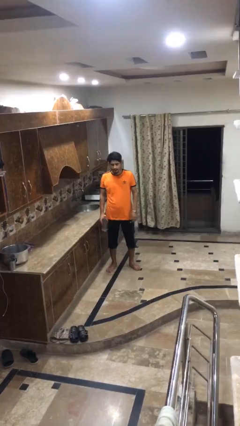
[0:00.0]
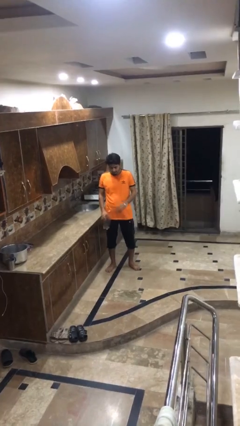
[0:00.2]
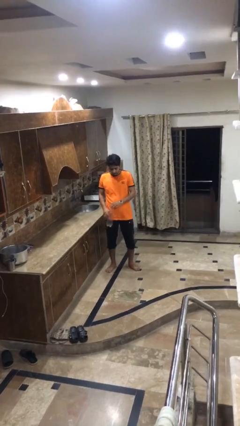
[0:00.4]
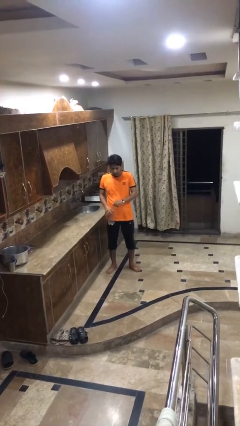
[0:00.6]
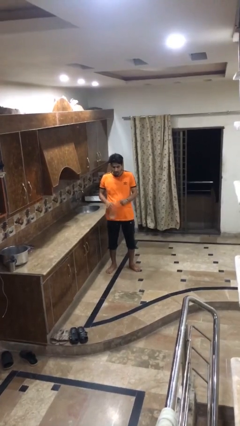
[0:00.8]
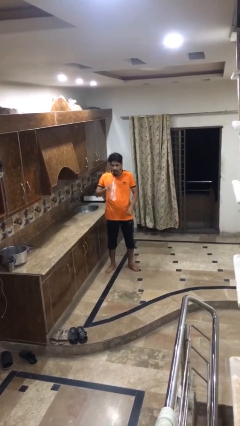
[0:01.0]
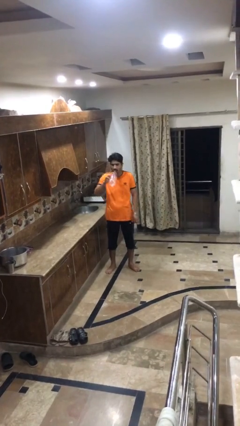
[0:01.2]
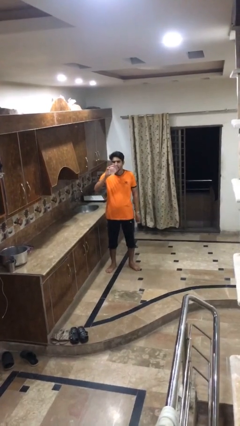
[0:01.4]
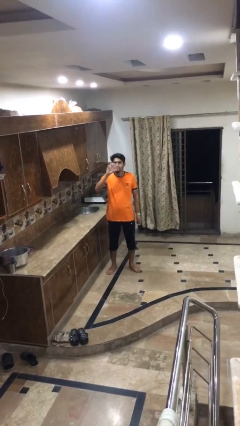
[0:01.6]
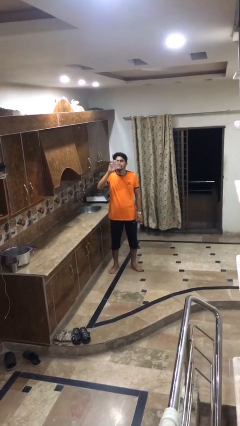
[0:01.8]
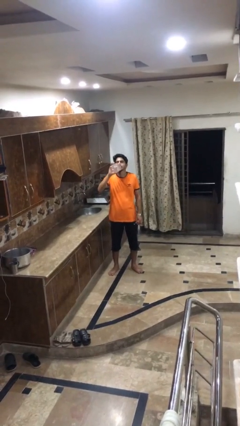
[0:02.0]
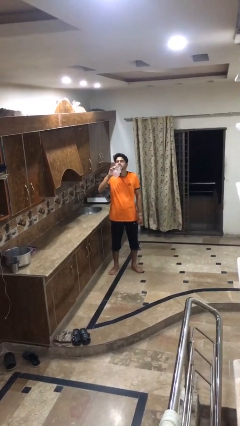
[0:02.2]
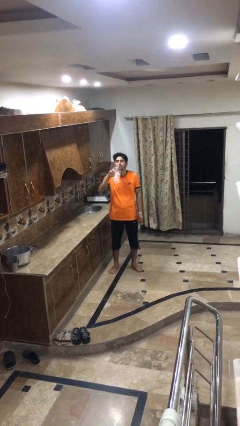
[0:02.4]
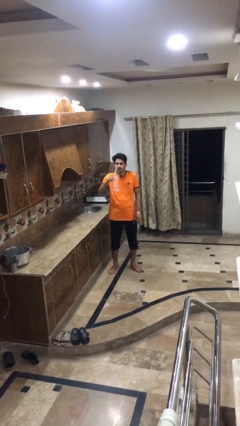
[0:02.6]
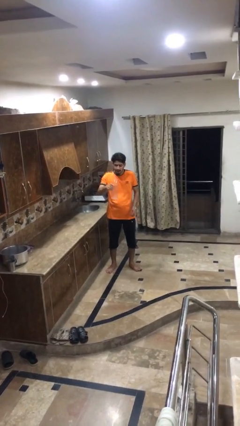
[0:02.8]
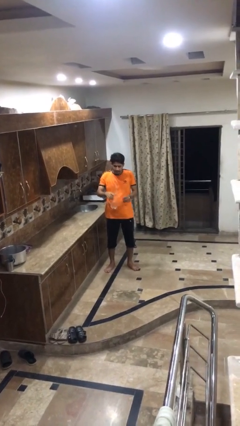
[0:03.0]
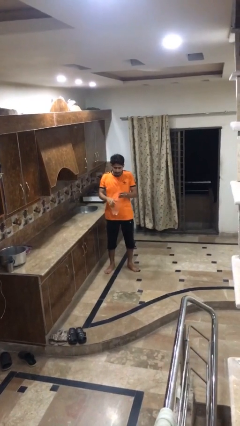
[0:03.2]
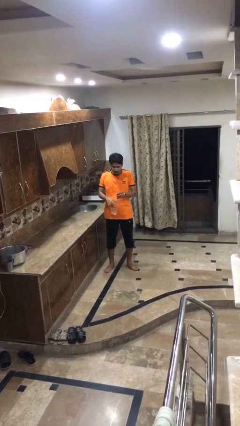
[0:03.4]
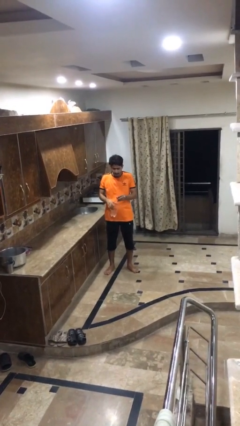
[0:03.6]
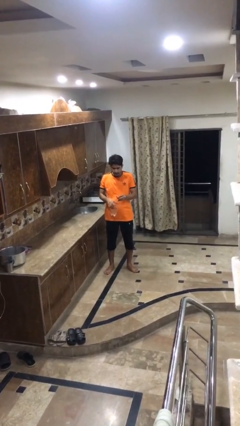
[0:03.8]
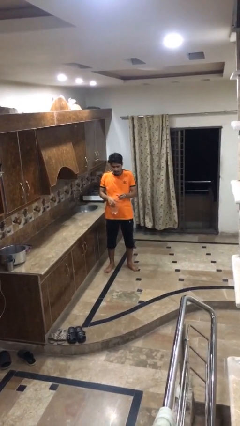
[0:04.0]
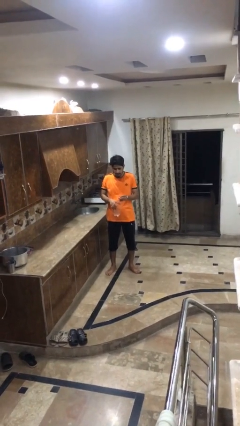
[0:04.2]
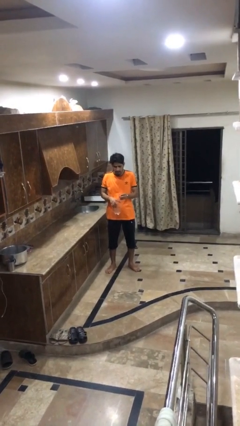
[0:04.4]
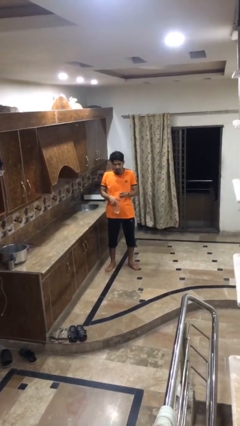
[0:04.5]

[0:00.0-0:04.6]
person drinks from bottle

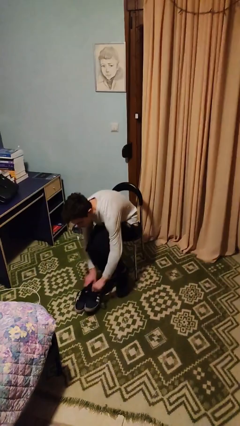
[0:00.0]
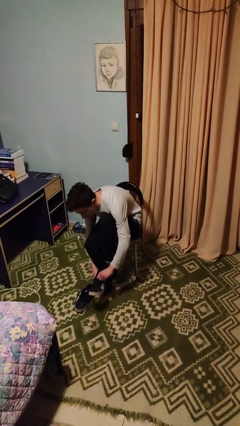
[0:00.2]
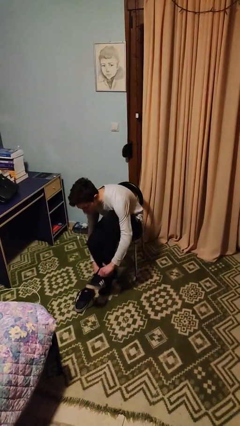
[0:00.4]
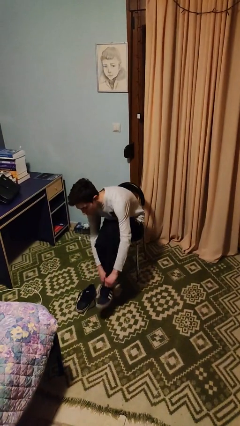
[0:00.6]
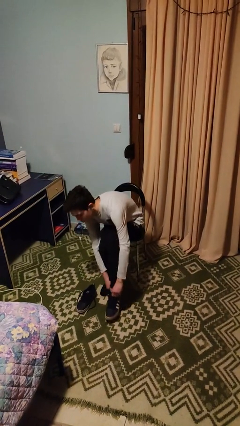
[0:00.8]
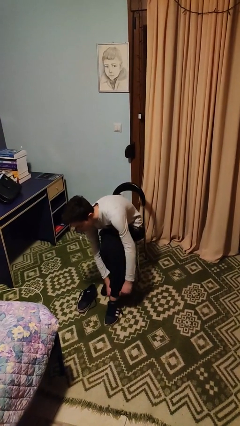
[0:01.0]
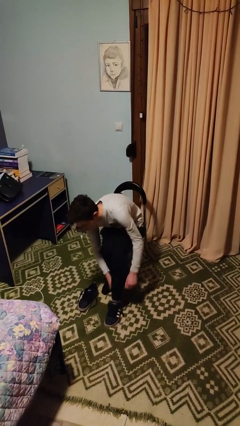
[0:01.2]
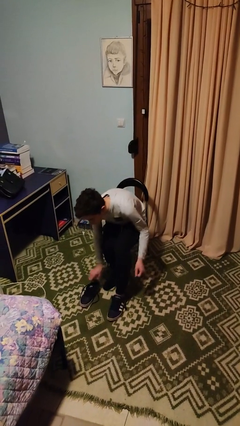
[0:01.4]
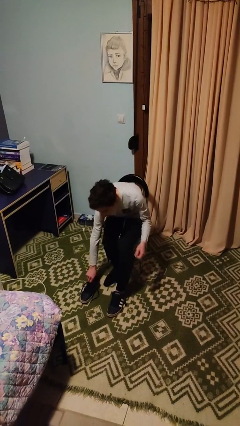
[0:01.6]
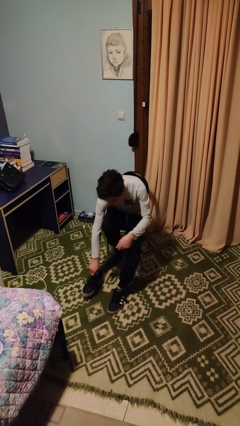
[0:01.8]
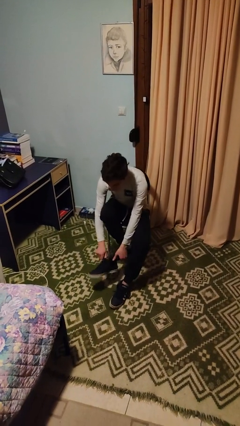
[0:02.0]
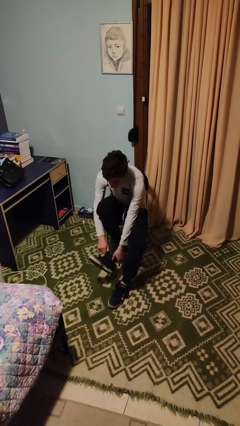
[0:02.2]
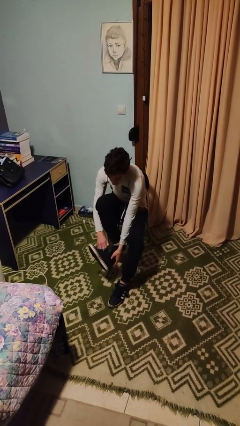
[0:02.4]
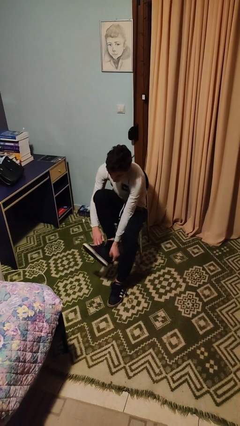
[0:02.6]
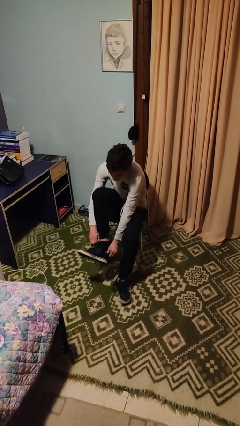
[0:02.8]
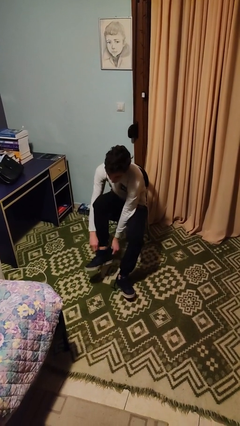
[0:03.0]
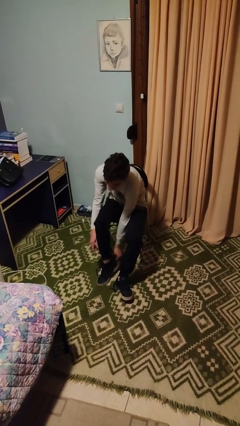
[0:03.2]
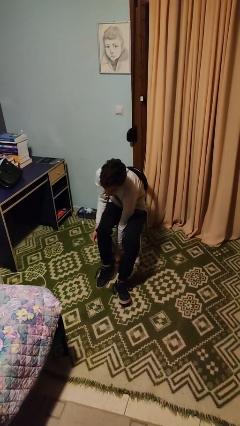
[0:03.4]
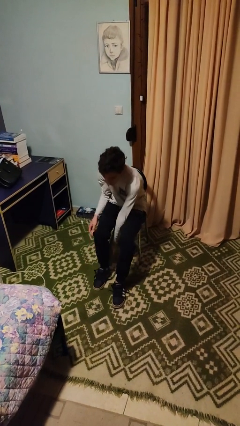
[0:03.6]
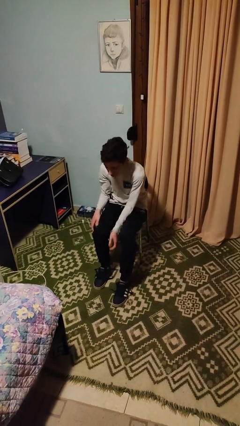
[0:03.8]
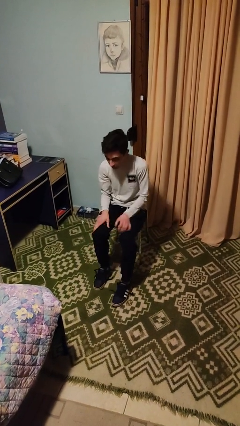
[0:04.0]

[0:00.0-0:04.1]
person puts on shoes

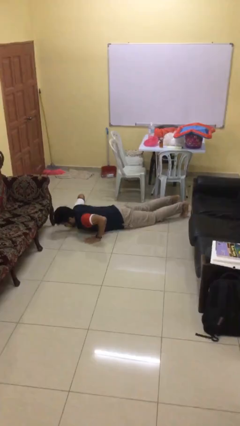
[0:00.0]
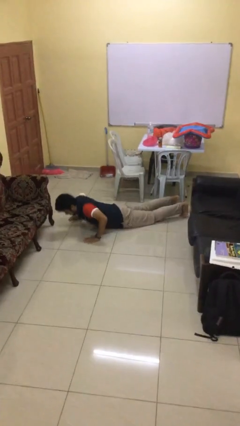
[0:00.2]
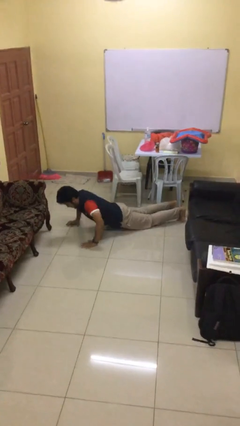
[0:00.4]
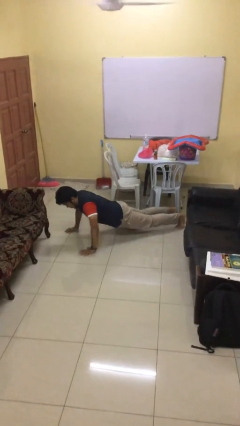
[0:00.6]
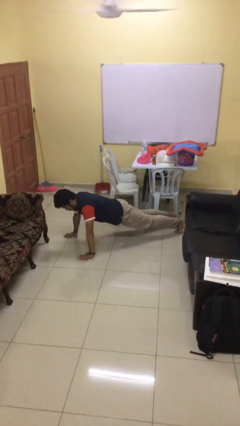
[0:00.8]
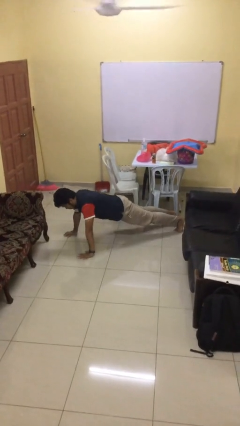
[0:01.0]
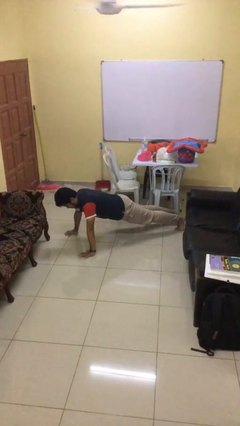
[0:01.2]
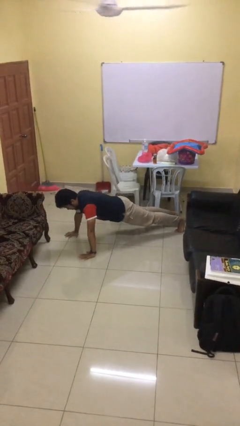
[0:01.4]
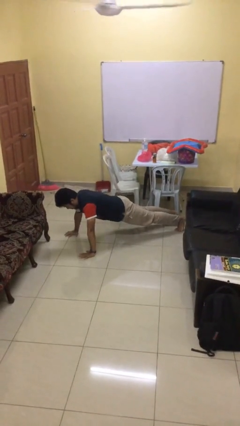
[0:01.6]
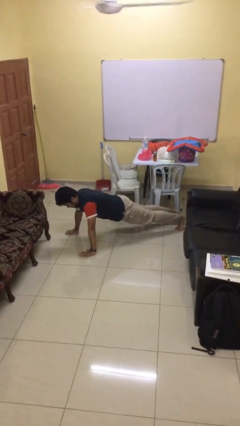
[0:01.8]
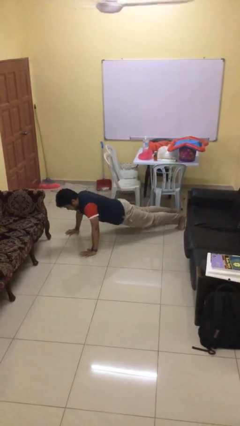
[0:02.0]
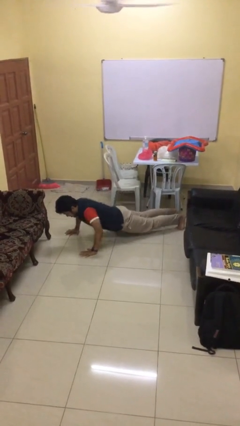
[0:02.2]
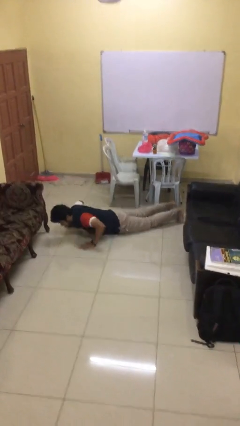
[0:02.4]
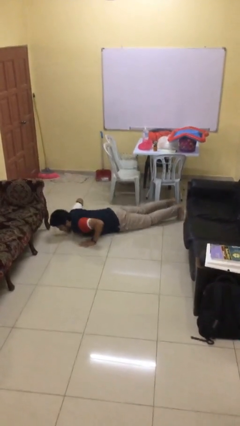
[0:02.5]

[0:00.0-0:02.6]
person exercises with pushup

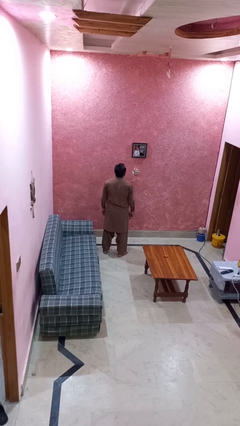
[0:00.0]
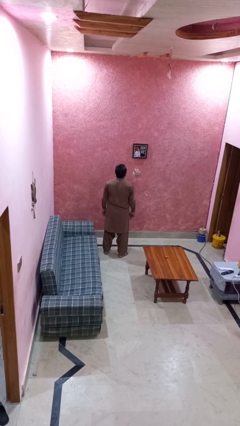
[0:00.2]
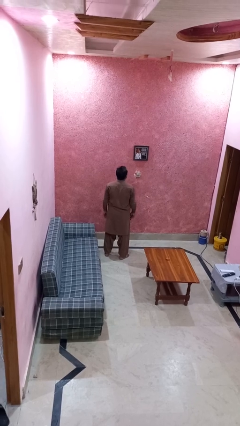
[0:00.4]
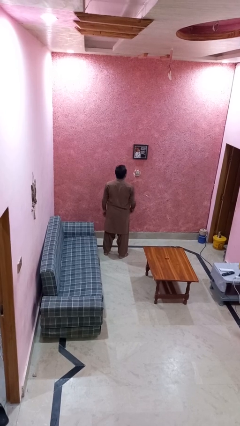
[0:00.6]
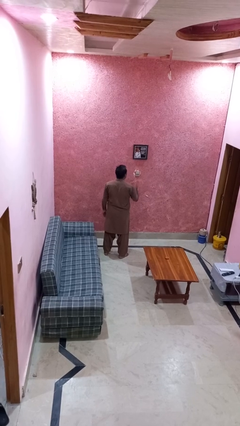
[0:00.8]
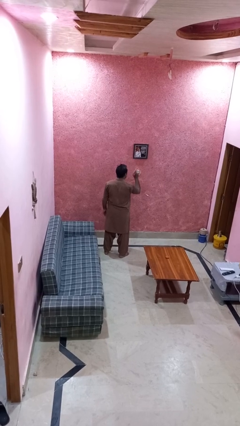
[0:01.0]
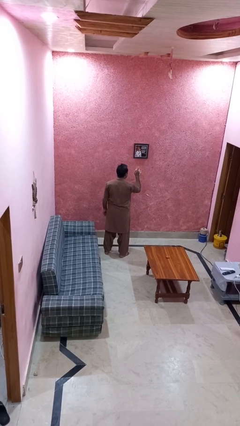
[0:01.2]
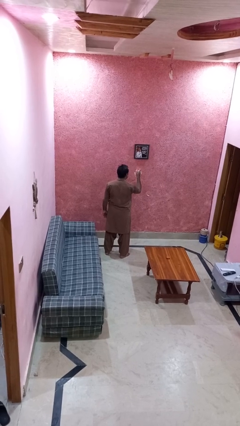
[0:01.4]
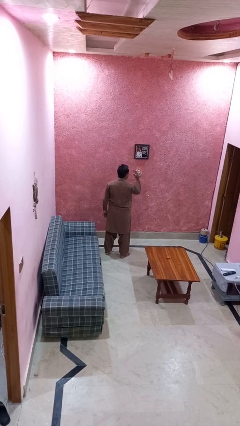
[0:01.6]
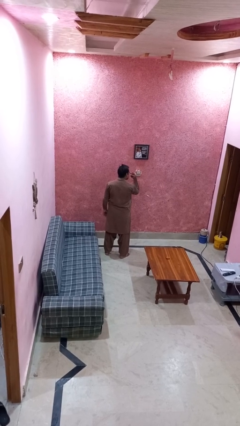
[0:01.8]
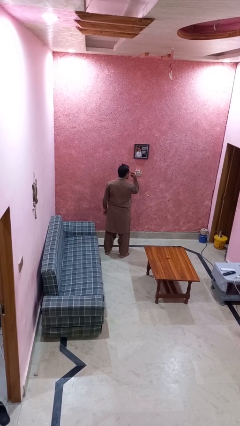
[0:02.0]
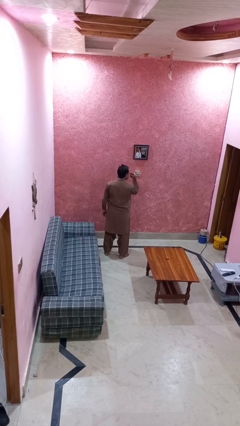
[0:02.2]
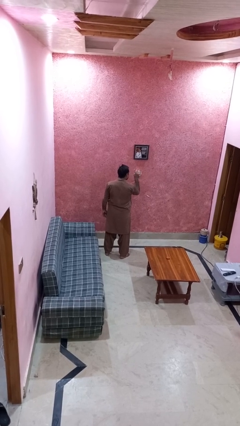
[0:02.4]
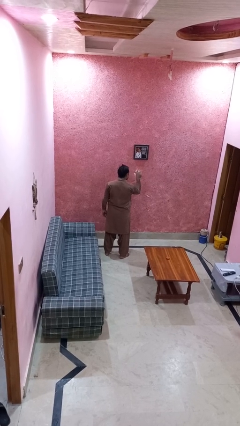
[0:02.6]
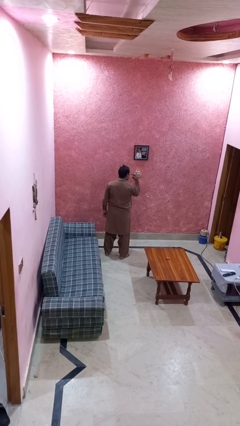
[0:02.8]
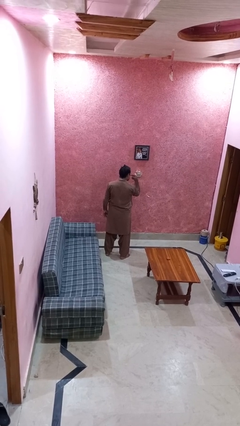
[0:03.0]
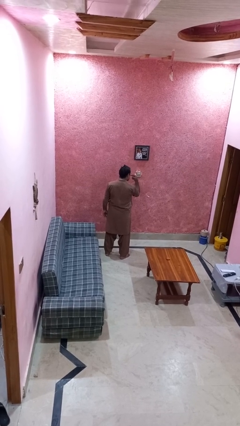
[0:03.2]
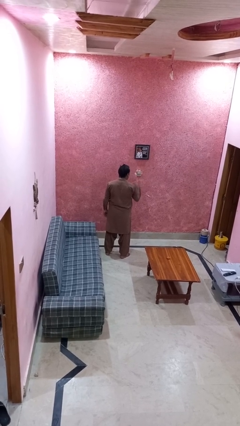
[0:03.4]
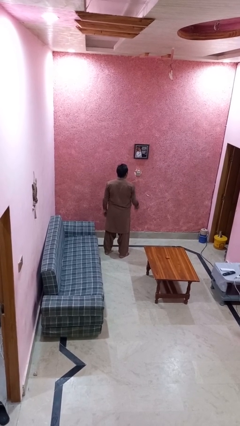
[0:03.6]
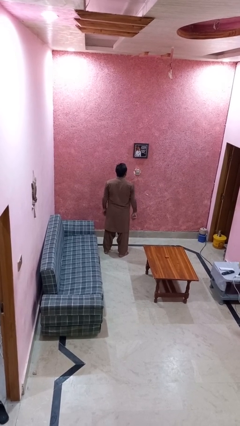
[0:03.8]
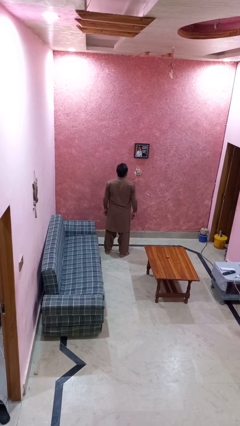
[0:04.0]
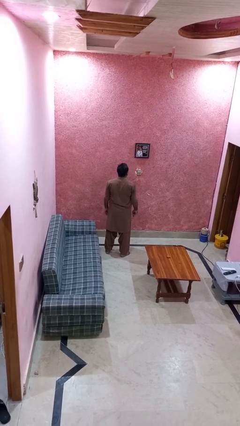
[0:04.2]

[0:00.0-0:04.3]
person gestures watch closely

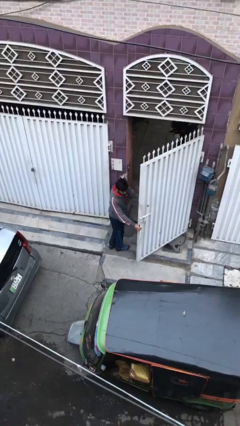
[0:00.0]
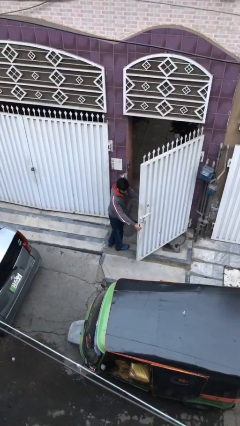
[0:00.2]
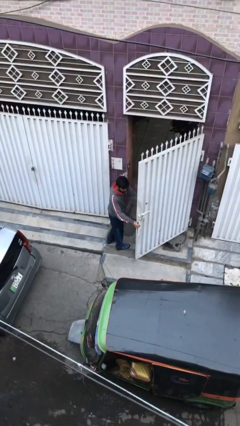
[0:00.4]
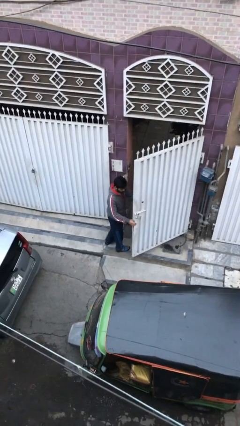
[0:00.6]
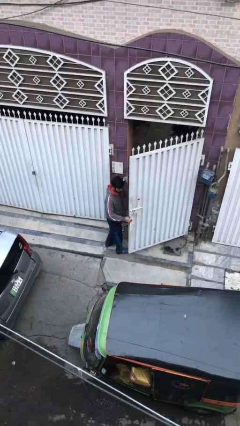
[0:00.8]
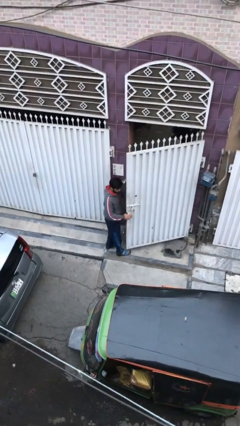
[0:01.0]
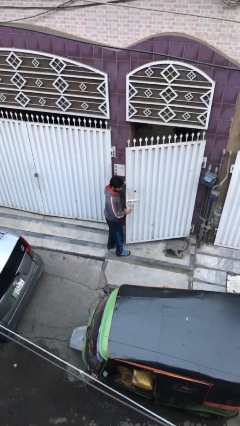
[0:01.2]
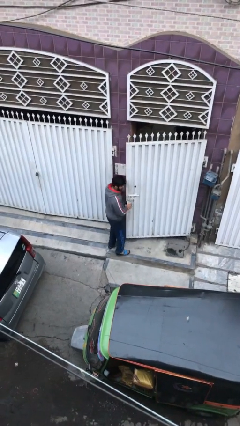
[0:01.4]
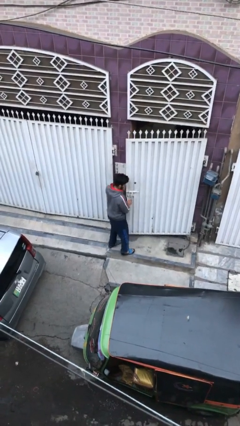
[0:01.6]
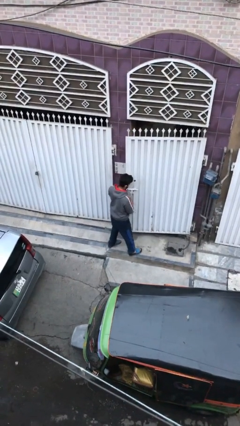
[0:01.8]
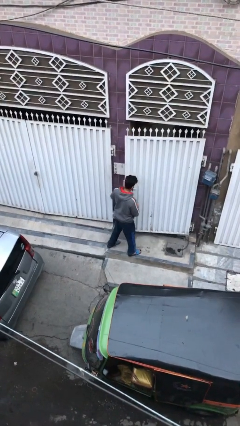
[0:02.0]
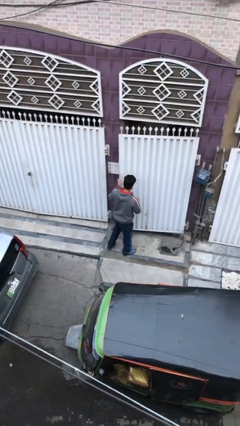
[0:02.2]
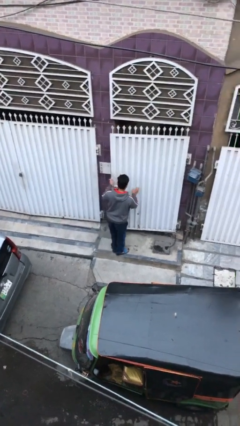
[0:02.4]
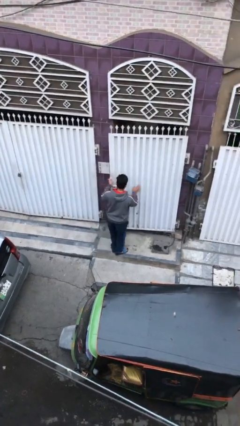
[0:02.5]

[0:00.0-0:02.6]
person closes facility door
